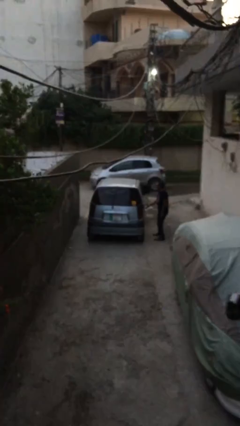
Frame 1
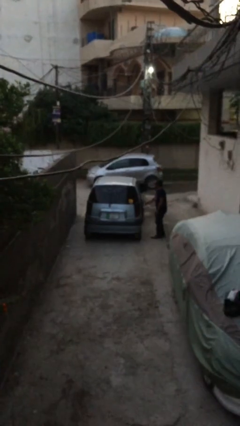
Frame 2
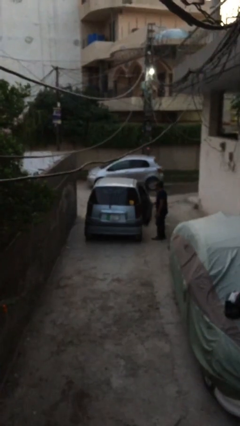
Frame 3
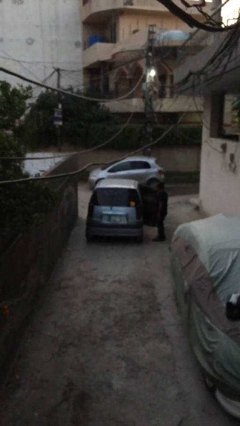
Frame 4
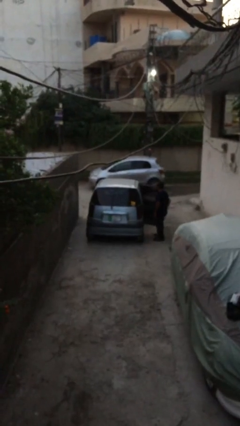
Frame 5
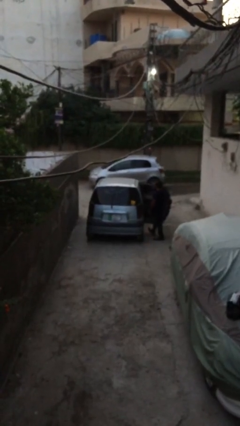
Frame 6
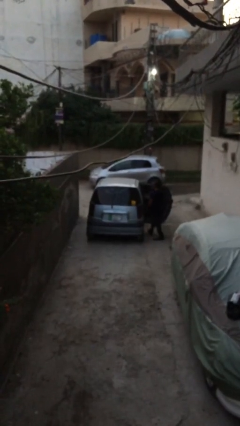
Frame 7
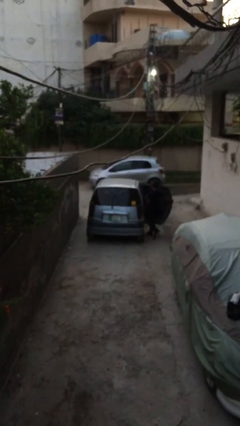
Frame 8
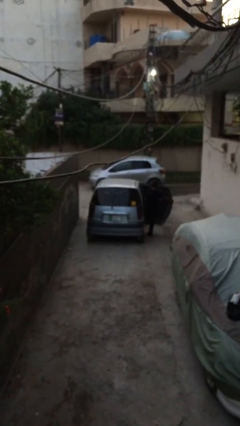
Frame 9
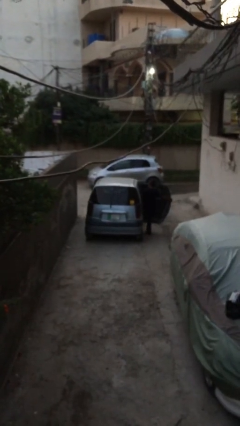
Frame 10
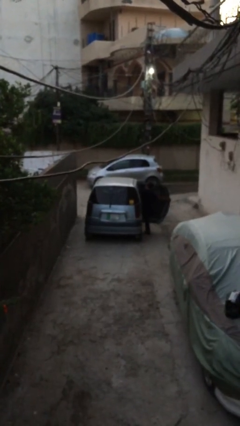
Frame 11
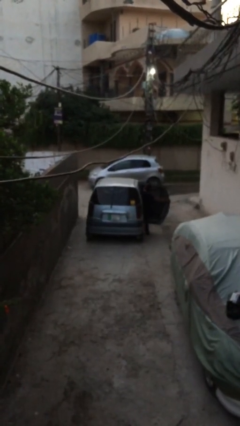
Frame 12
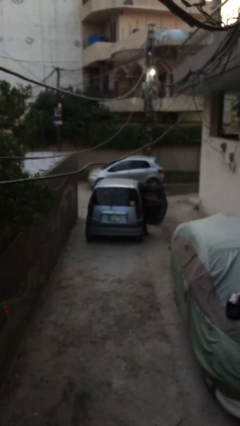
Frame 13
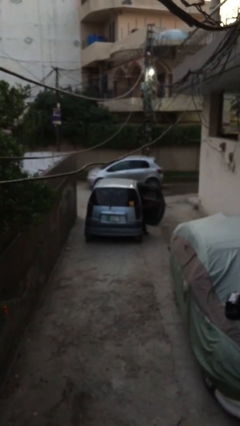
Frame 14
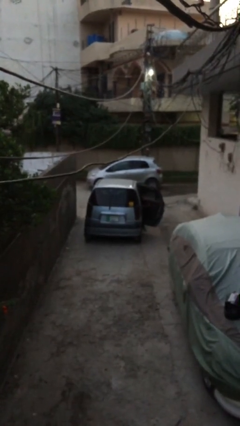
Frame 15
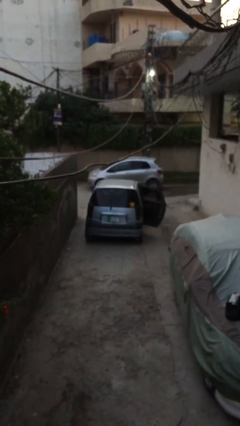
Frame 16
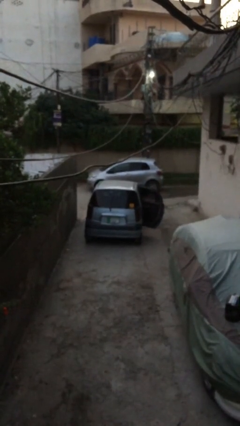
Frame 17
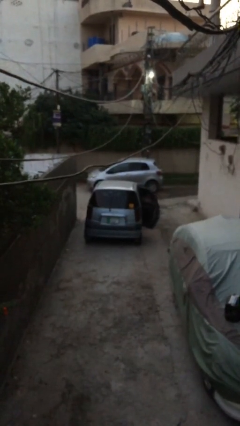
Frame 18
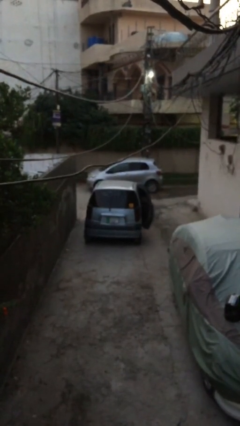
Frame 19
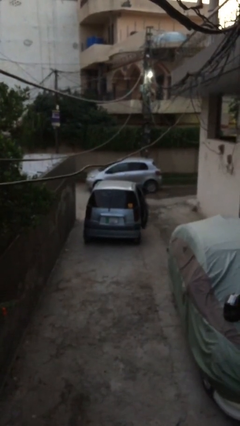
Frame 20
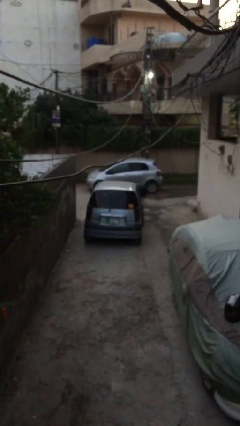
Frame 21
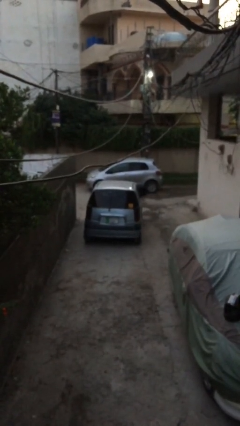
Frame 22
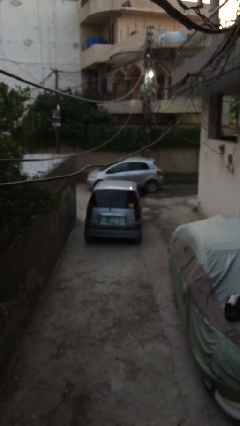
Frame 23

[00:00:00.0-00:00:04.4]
car picks up person

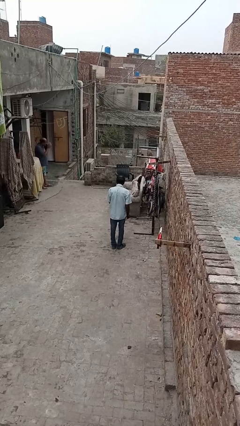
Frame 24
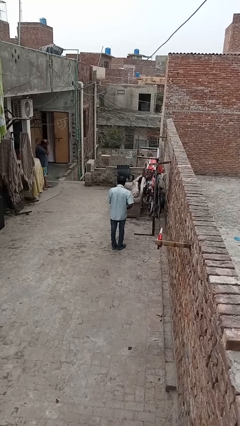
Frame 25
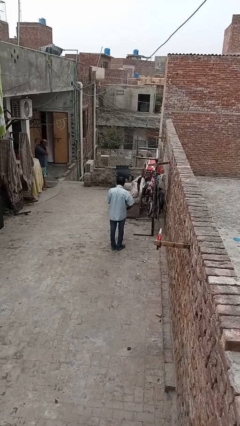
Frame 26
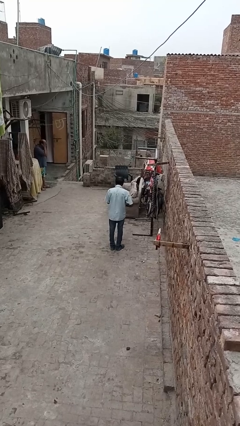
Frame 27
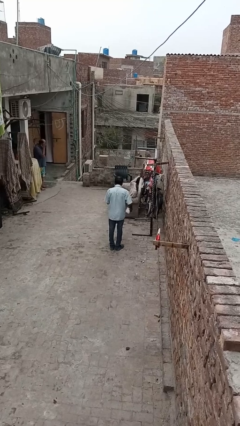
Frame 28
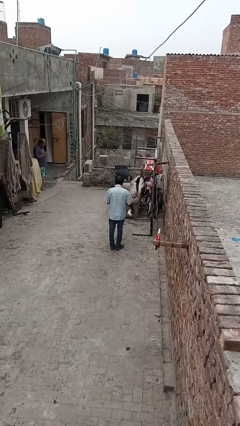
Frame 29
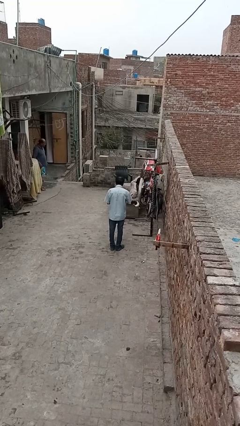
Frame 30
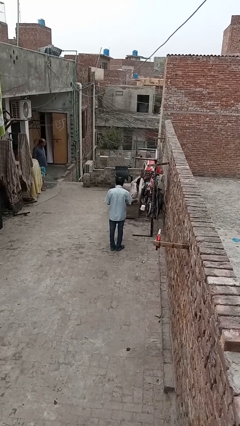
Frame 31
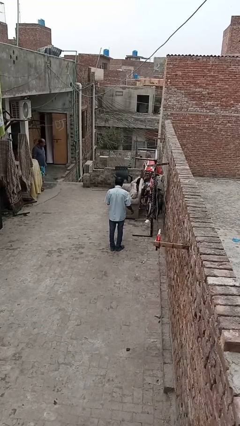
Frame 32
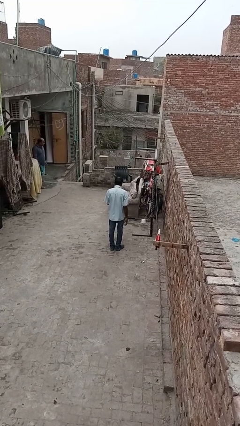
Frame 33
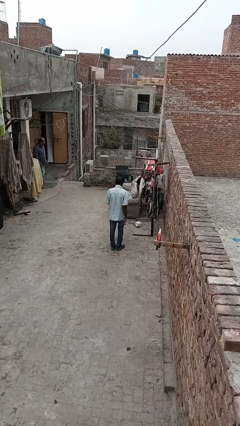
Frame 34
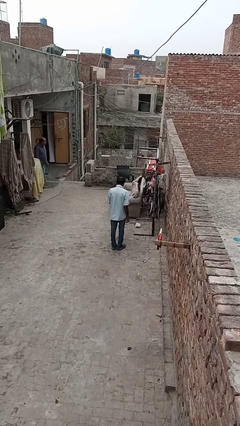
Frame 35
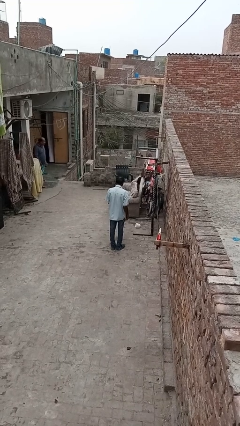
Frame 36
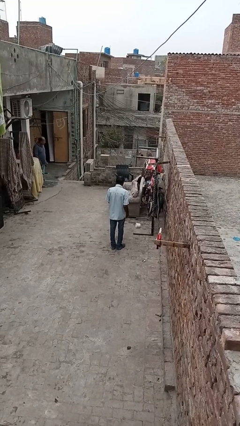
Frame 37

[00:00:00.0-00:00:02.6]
person cleans table with rag

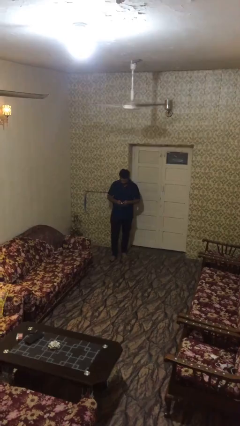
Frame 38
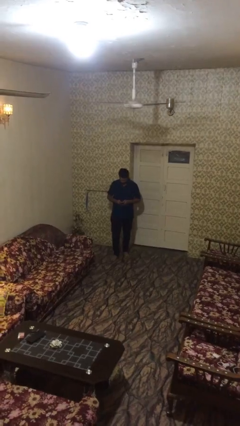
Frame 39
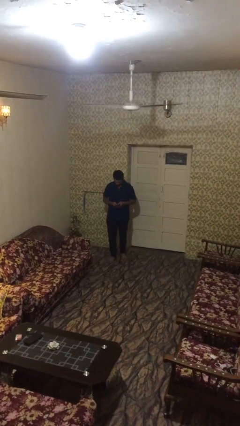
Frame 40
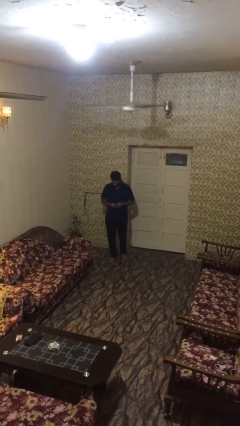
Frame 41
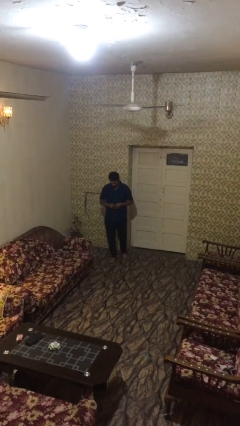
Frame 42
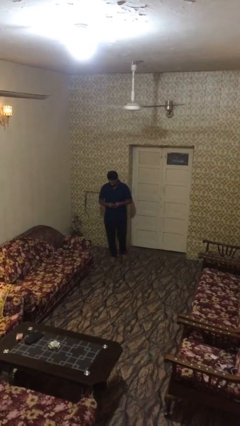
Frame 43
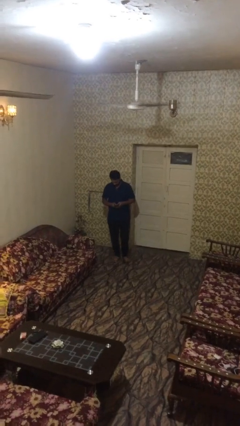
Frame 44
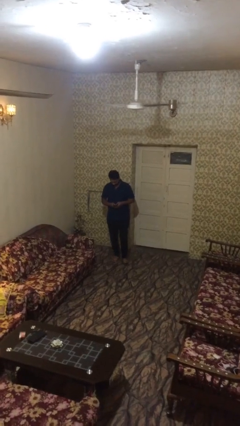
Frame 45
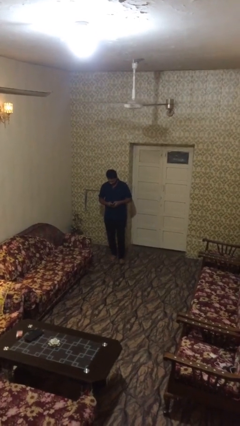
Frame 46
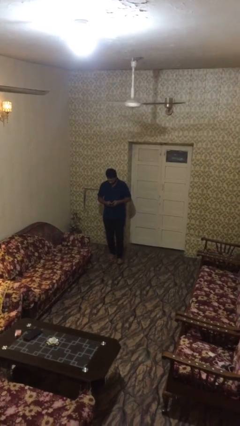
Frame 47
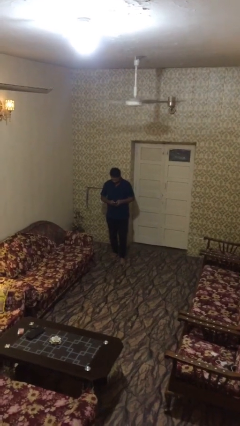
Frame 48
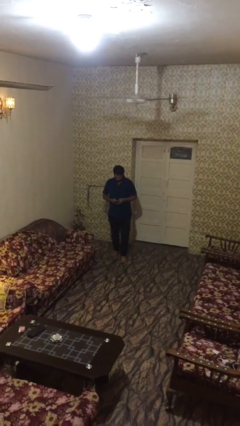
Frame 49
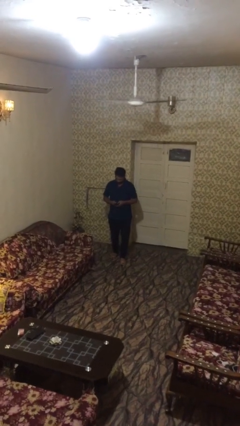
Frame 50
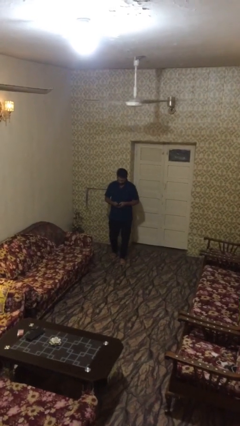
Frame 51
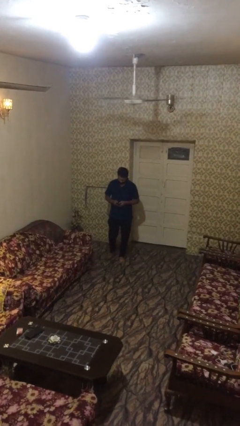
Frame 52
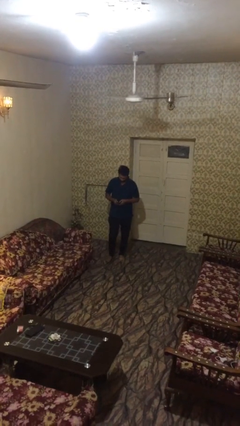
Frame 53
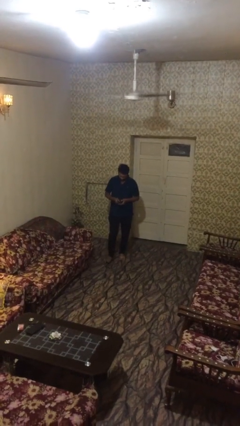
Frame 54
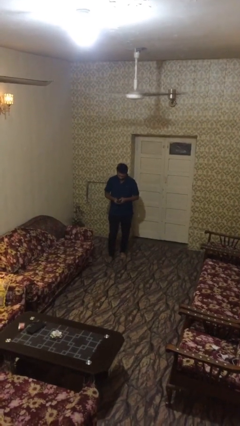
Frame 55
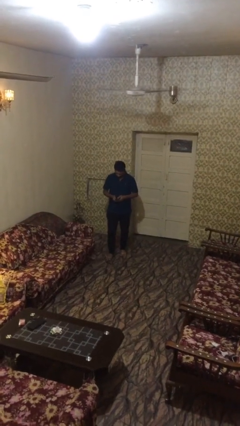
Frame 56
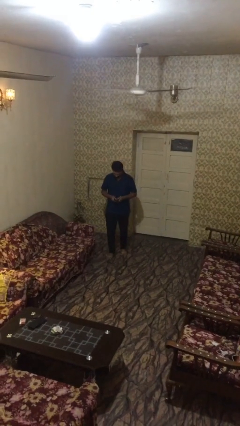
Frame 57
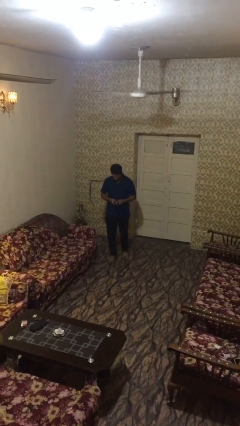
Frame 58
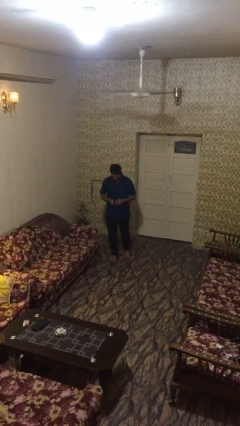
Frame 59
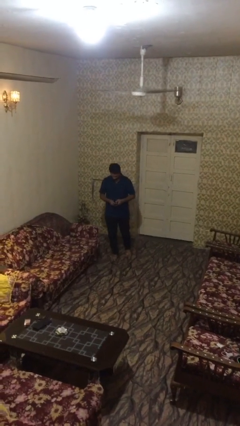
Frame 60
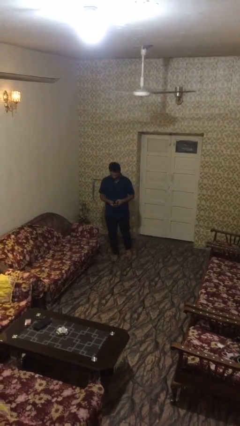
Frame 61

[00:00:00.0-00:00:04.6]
person texts on phone

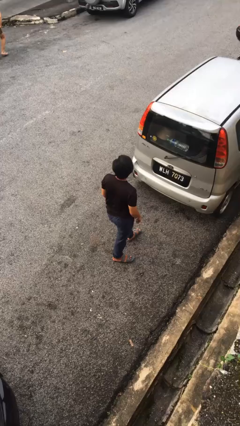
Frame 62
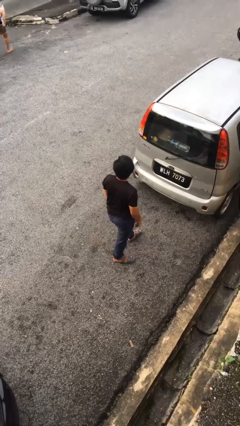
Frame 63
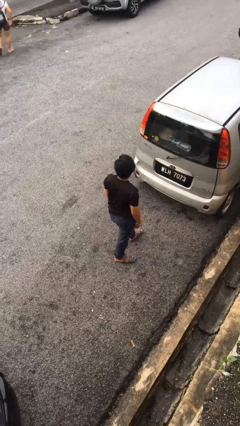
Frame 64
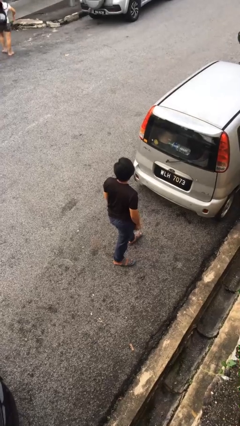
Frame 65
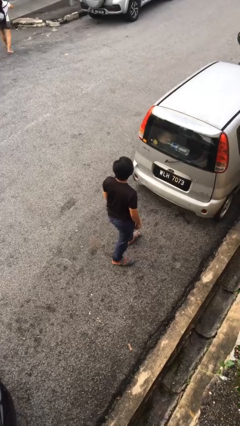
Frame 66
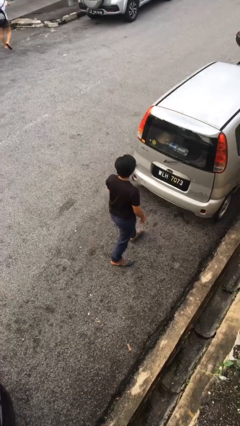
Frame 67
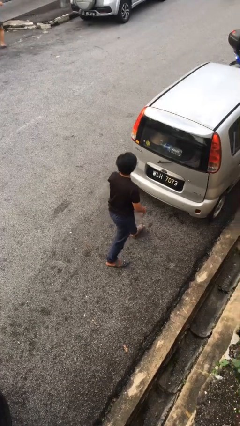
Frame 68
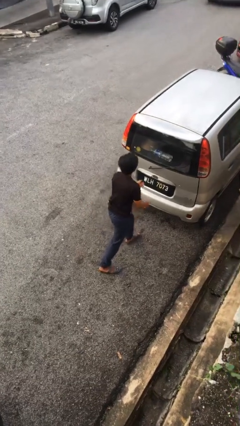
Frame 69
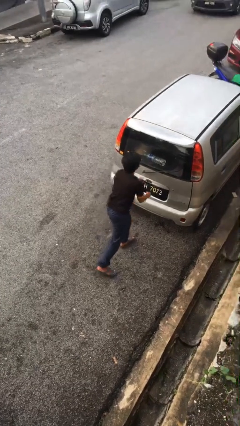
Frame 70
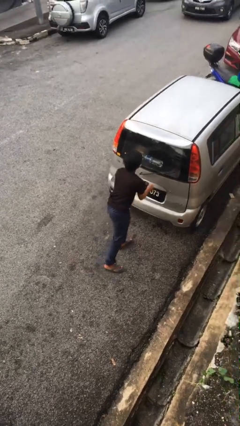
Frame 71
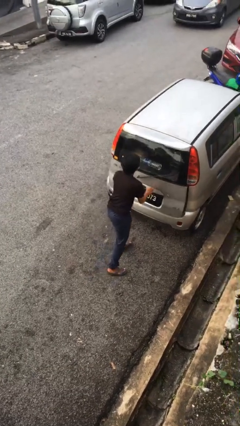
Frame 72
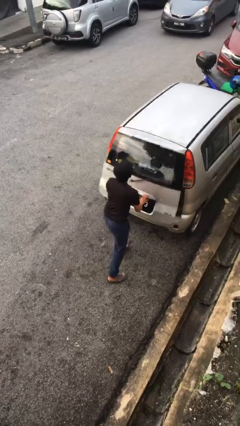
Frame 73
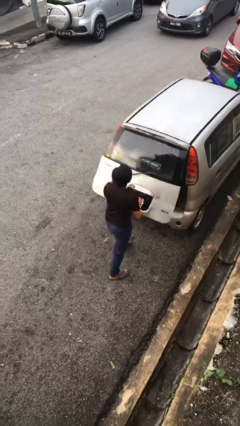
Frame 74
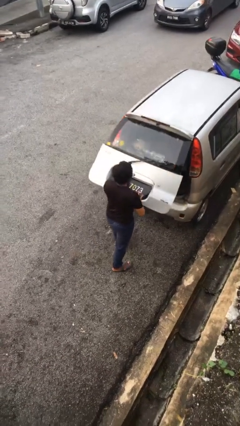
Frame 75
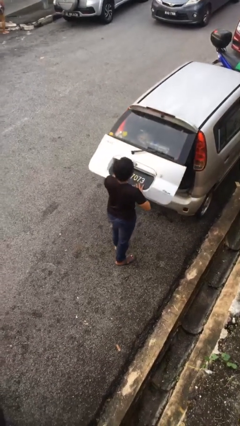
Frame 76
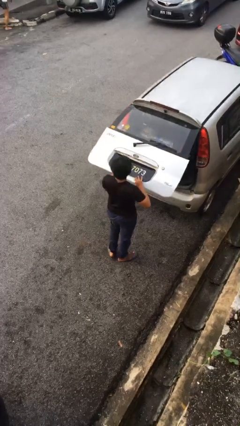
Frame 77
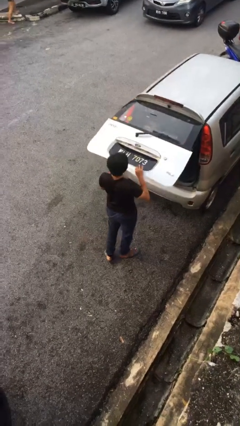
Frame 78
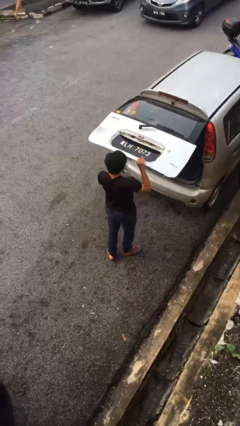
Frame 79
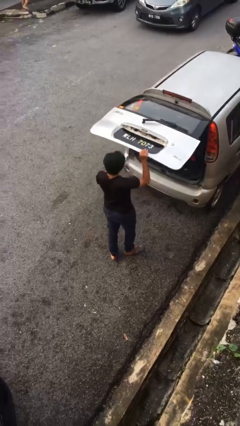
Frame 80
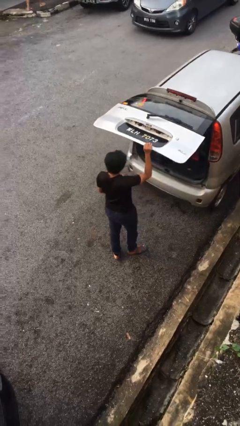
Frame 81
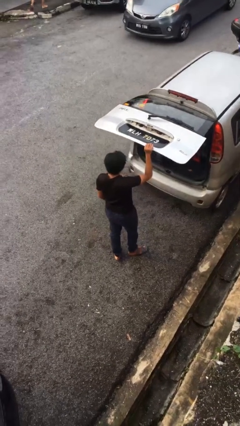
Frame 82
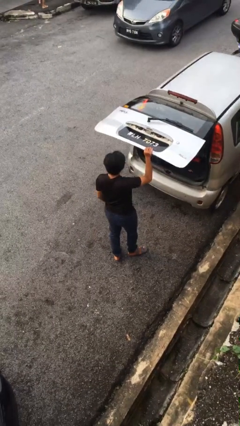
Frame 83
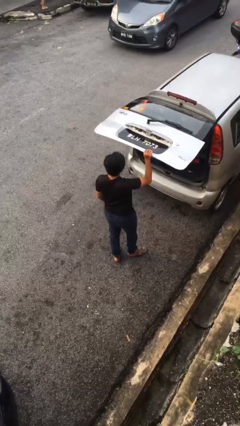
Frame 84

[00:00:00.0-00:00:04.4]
person opens car trunk

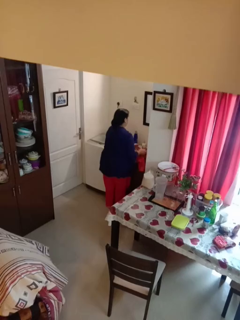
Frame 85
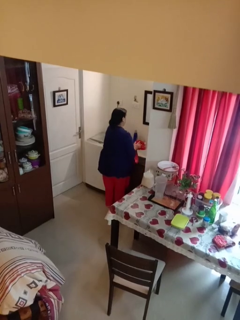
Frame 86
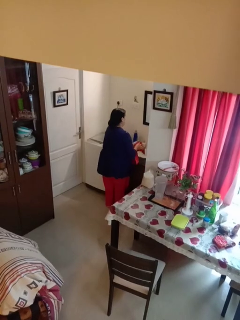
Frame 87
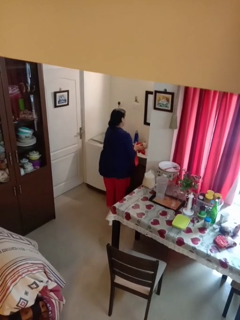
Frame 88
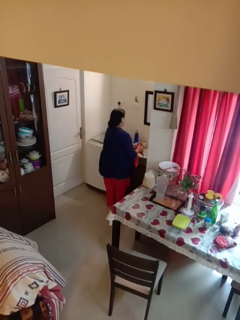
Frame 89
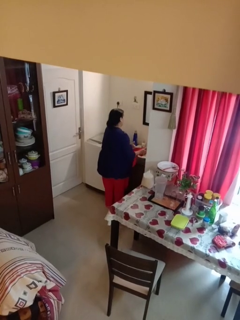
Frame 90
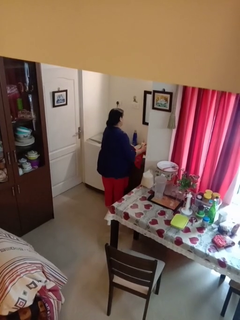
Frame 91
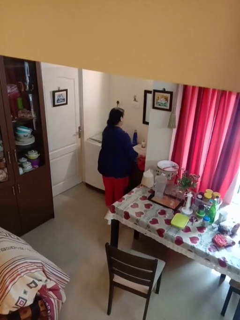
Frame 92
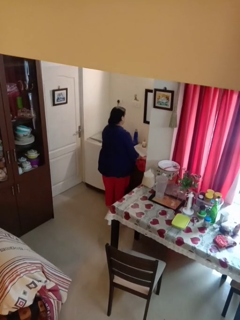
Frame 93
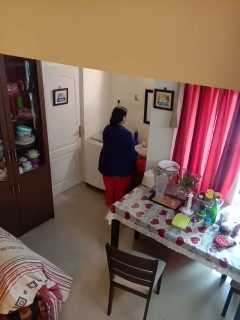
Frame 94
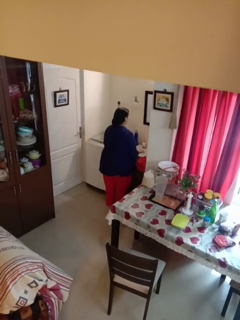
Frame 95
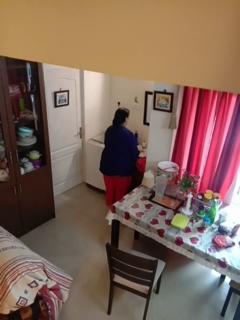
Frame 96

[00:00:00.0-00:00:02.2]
person dries hands with towel
